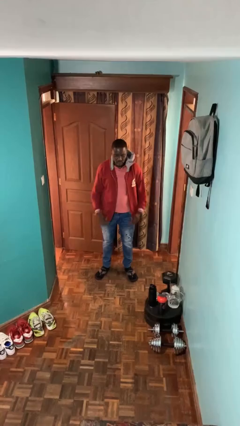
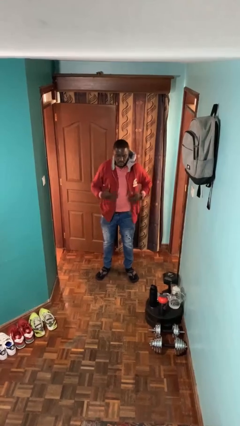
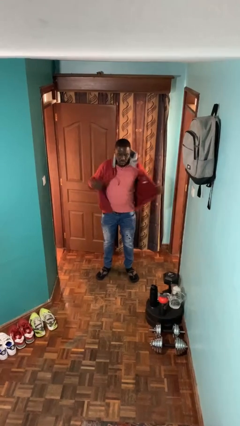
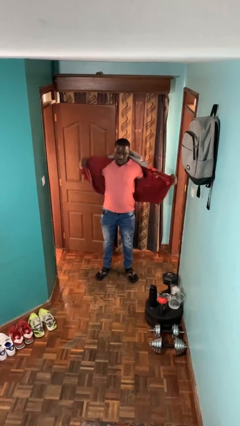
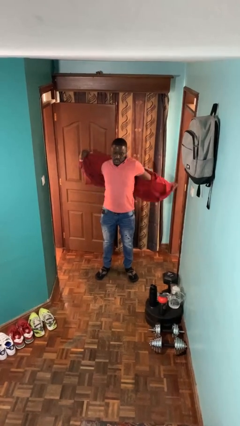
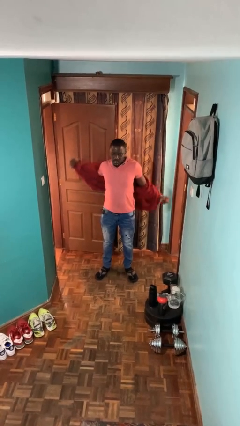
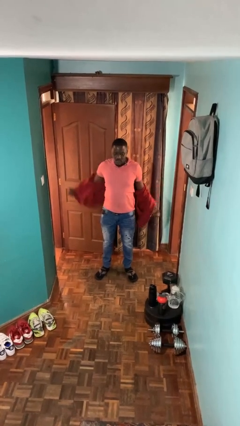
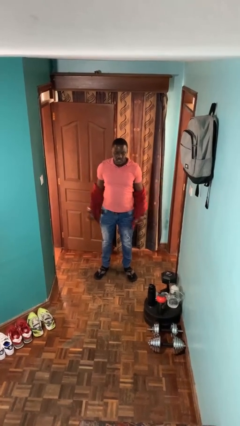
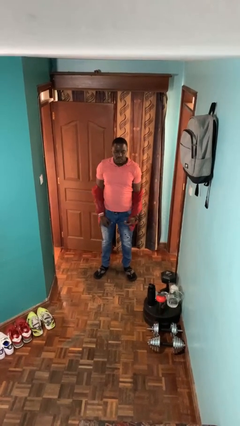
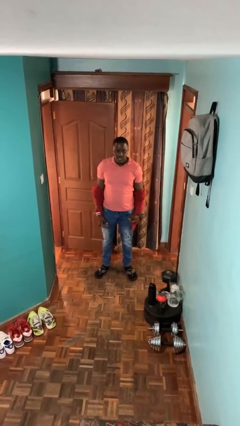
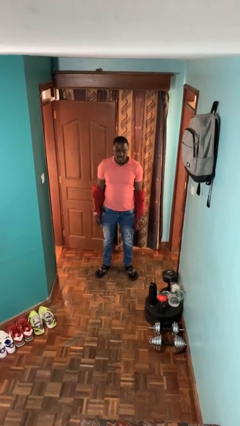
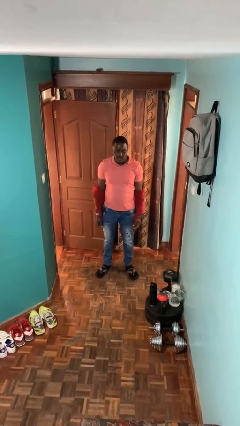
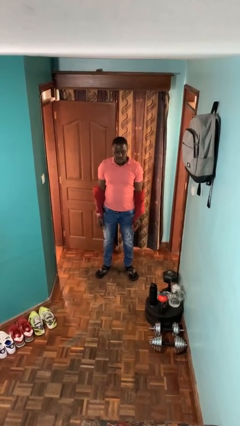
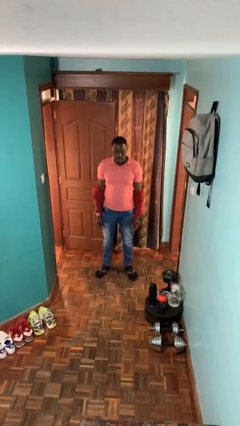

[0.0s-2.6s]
person takes off jacket

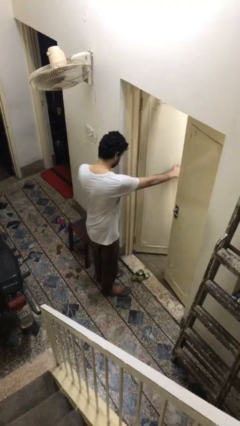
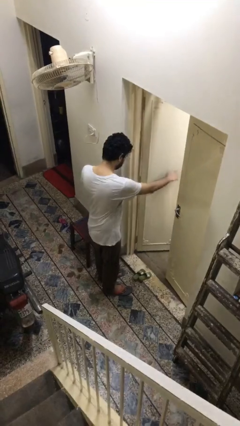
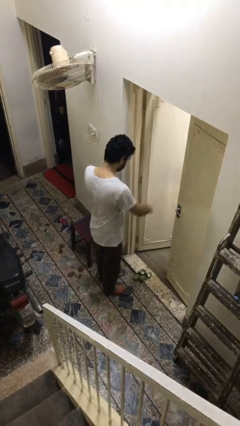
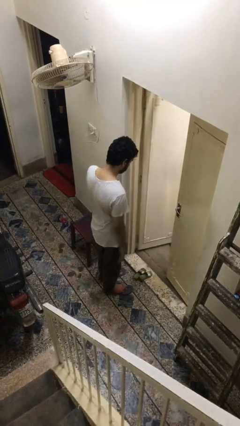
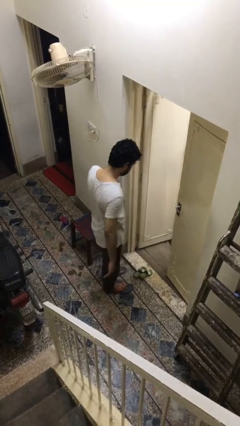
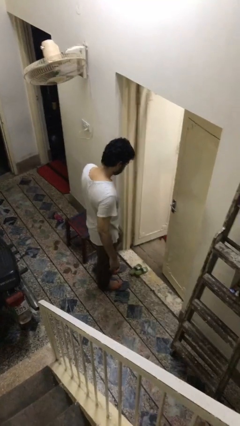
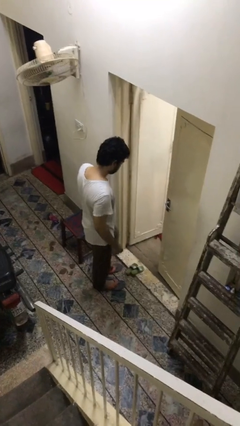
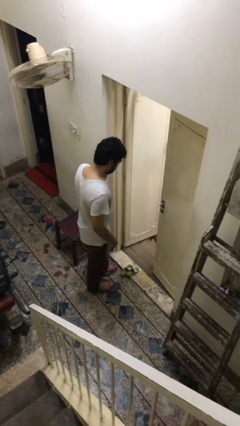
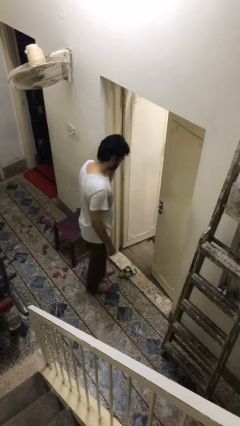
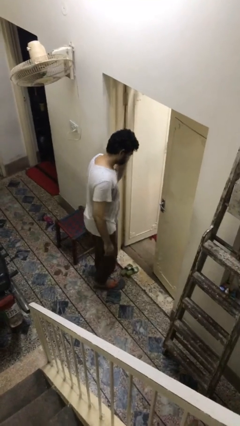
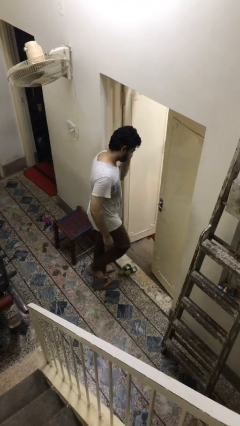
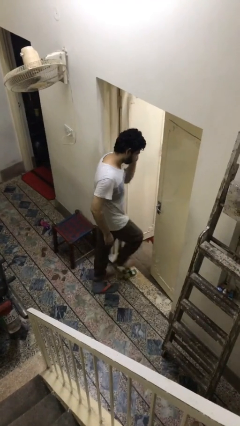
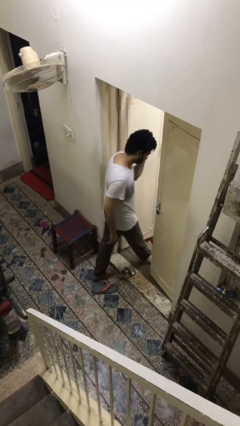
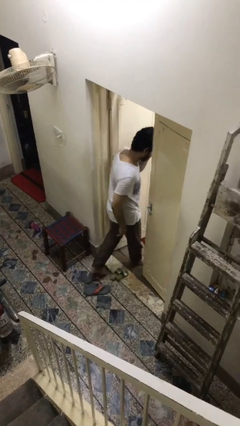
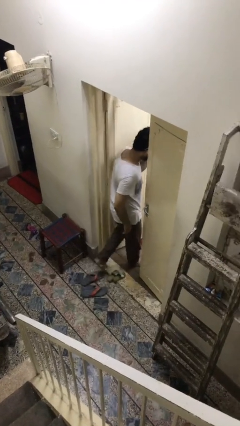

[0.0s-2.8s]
person exits scene through structure

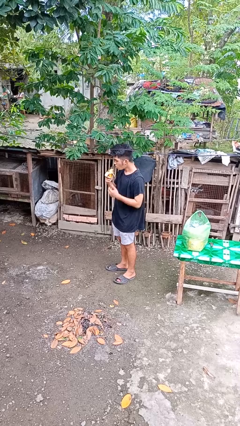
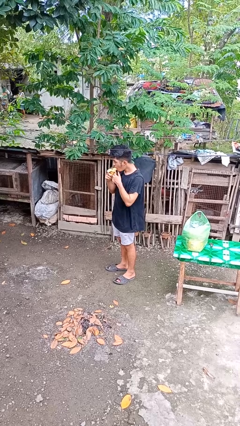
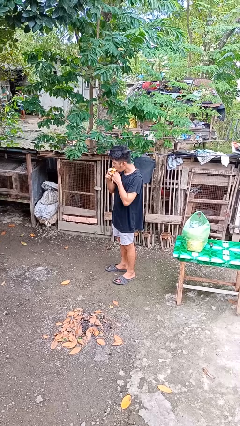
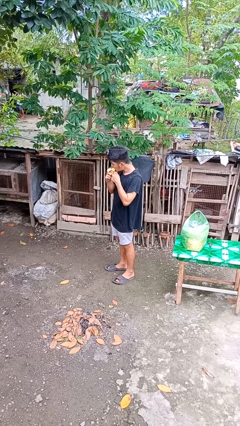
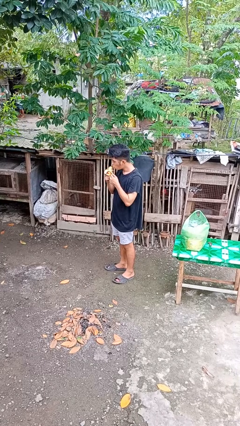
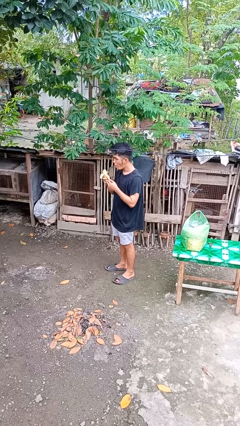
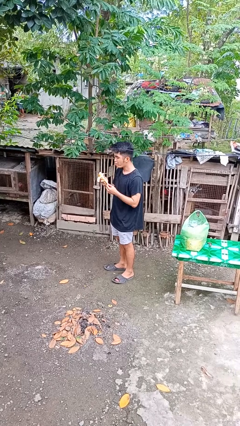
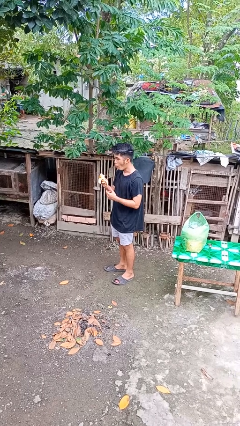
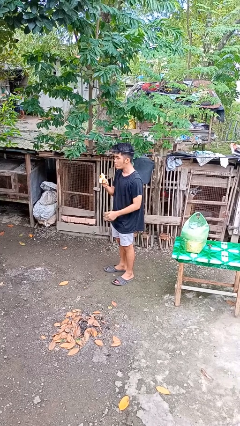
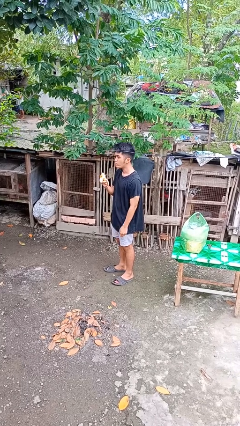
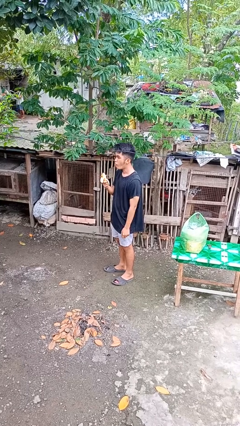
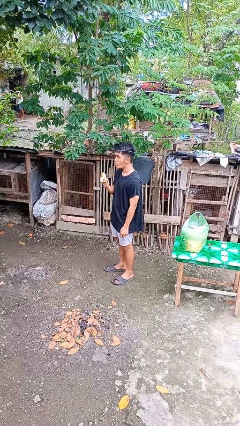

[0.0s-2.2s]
person eats banana

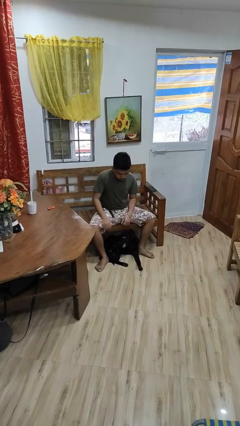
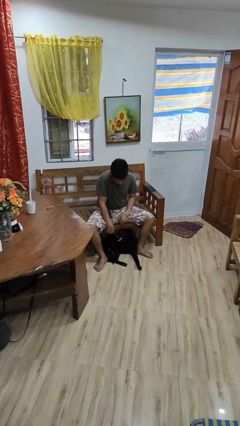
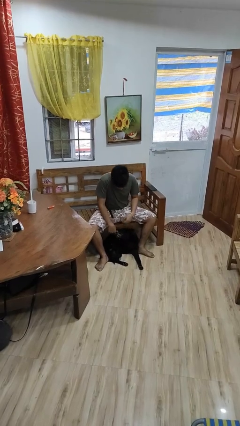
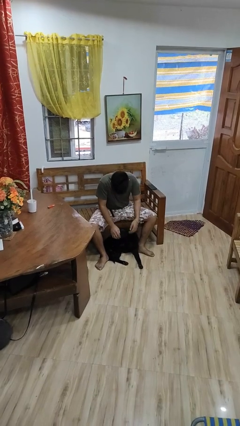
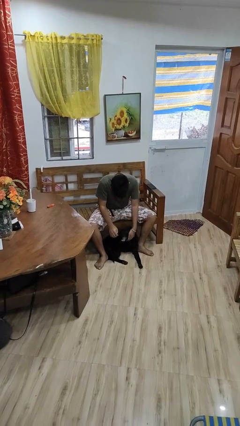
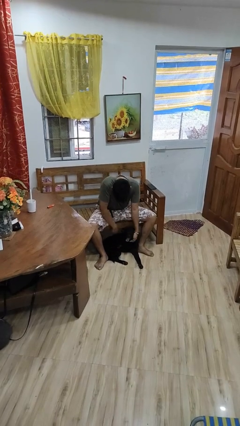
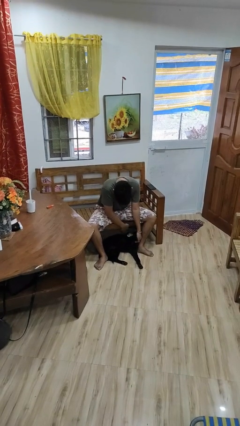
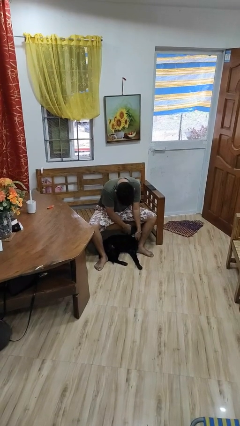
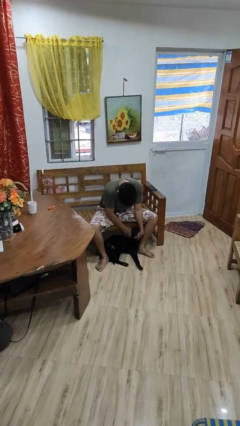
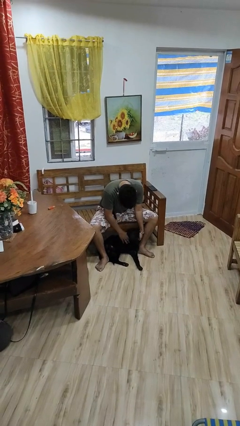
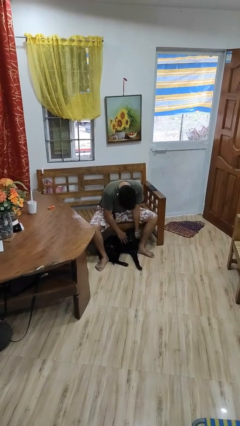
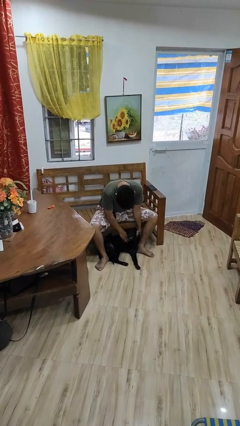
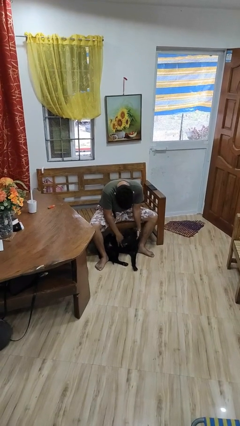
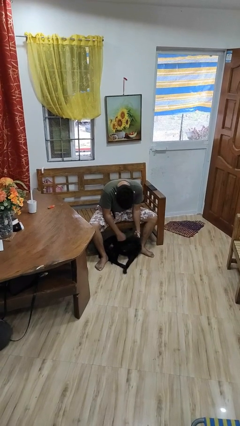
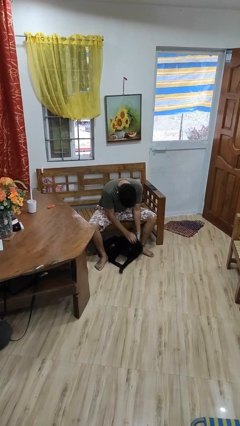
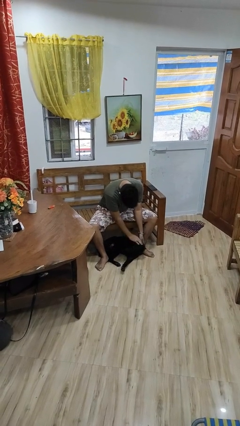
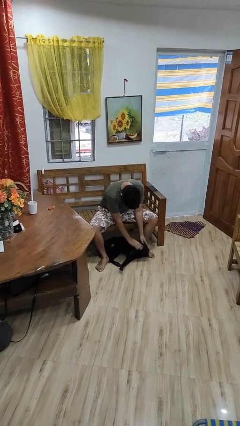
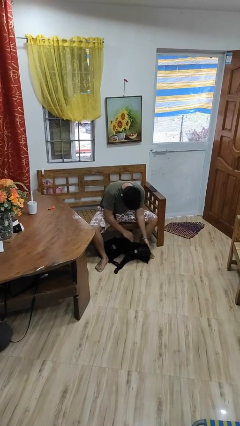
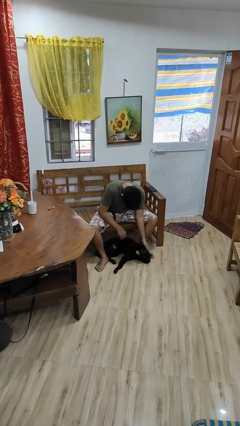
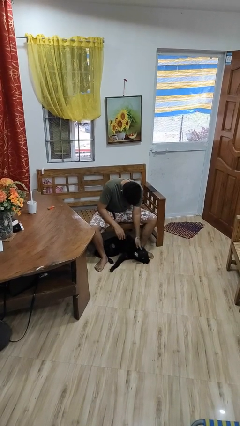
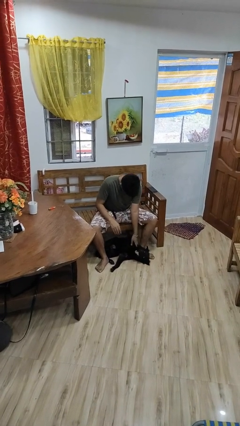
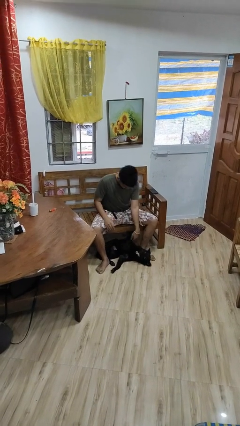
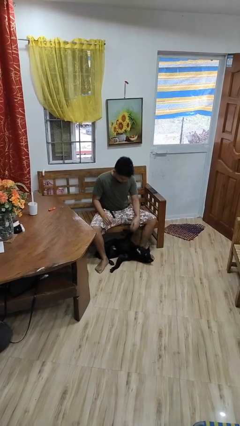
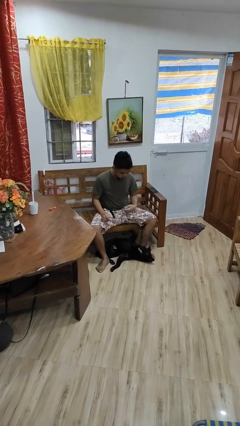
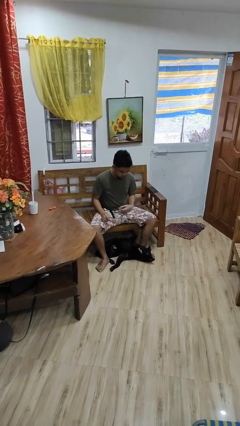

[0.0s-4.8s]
person pets dog

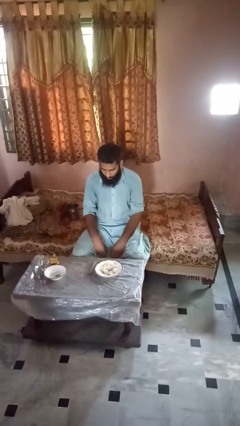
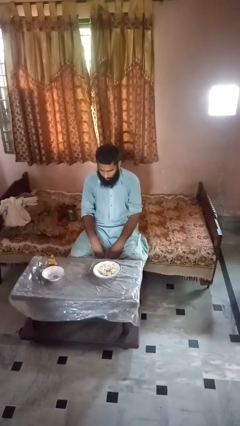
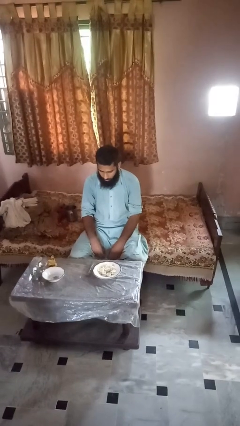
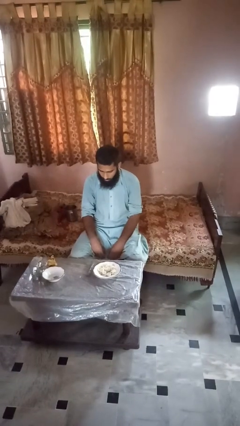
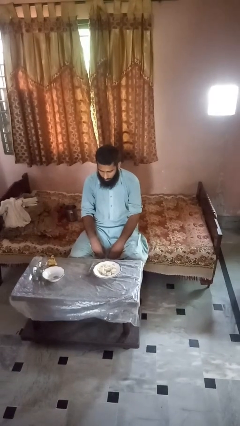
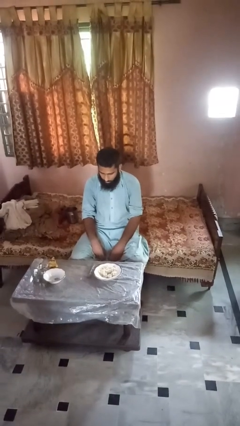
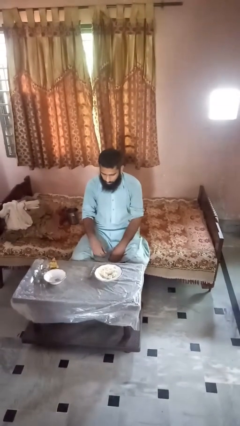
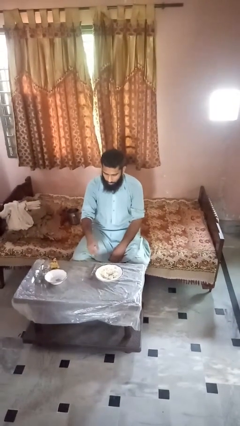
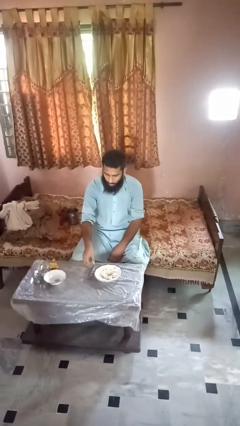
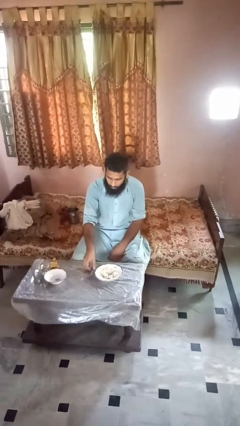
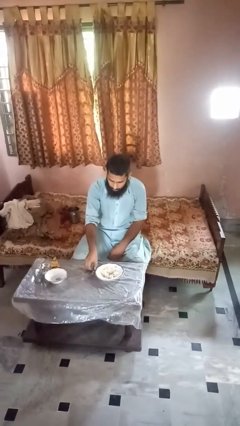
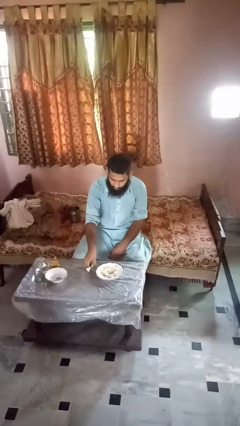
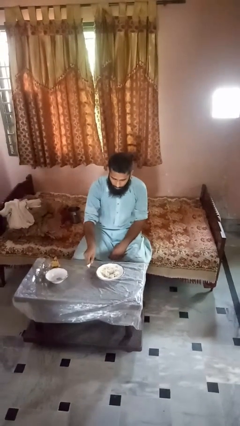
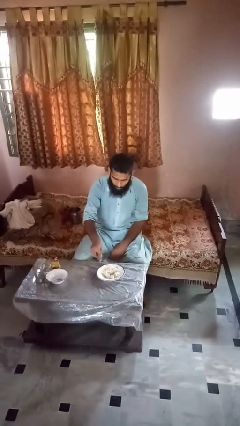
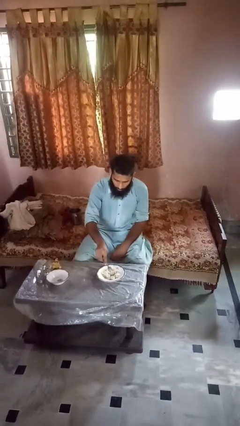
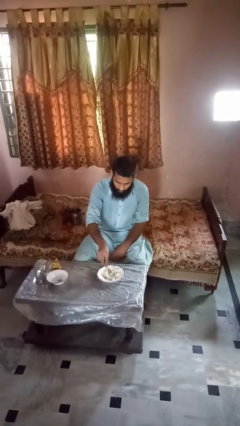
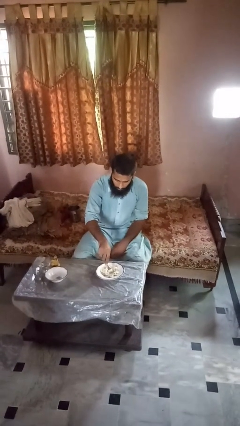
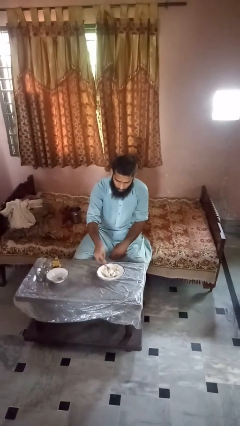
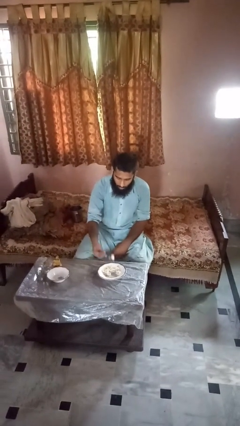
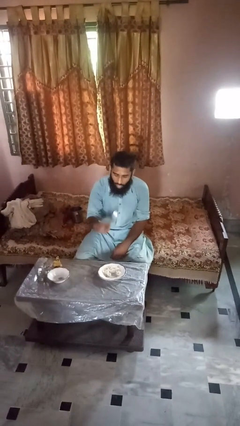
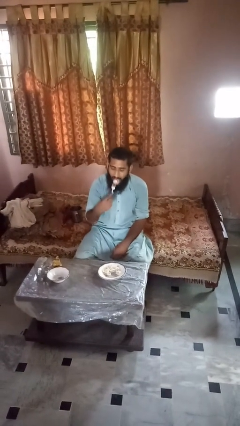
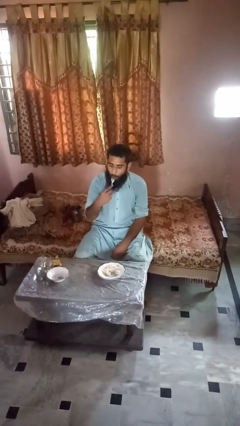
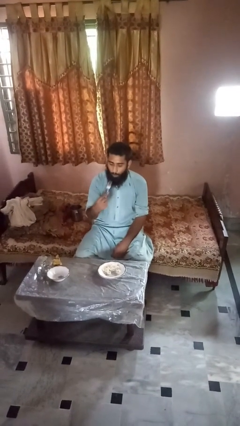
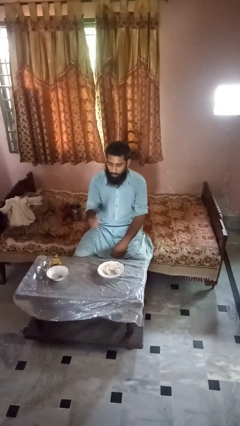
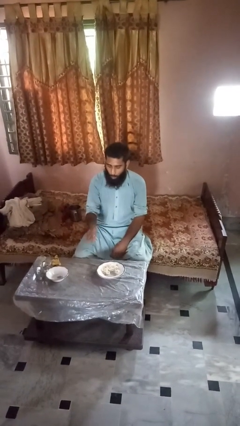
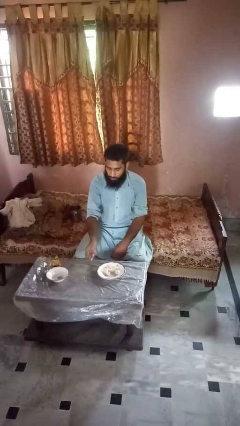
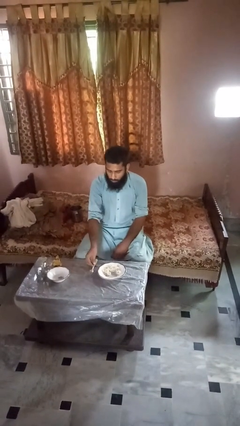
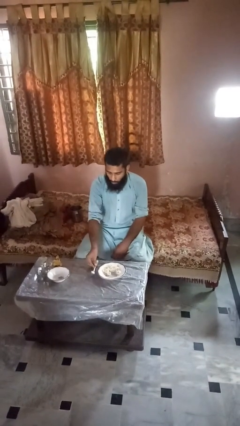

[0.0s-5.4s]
person eats with utensil
